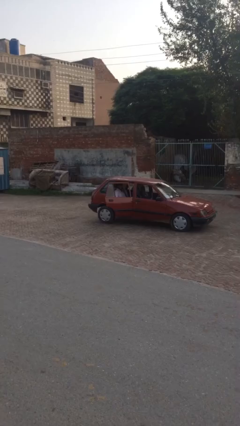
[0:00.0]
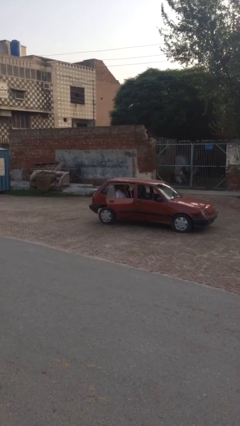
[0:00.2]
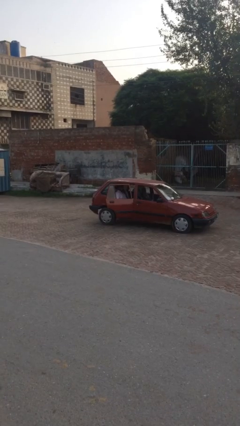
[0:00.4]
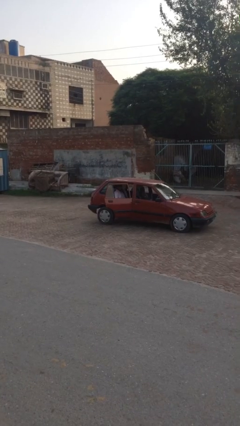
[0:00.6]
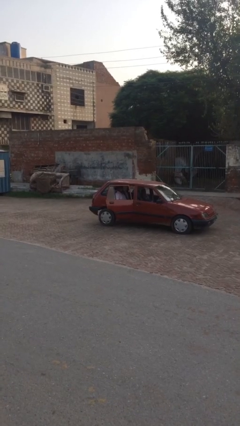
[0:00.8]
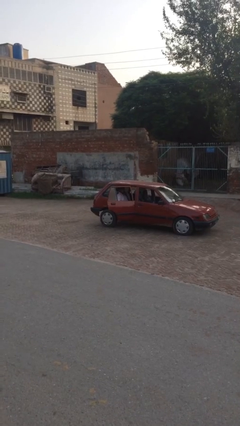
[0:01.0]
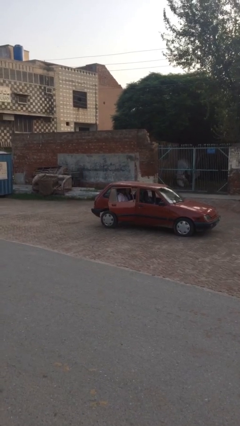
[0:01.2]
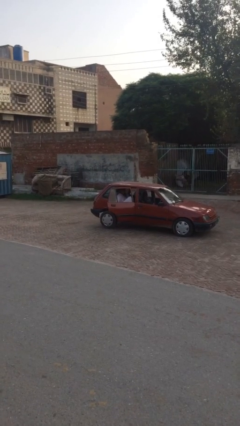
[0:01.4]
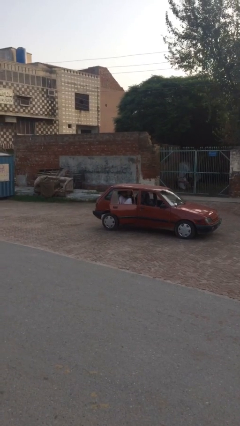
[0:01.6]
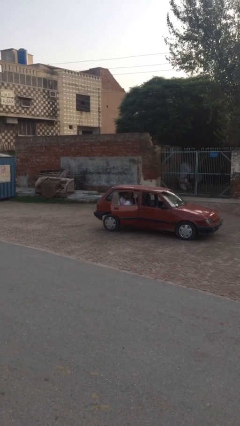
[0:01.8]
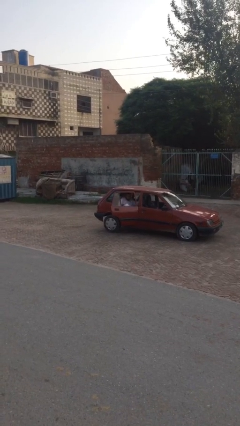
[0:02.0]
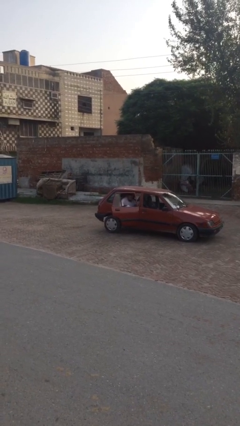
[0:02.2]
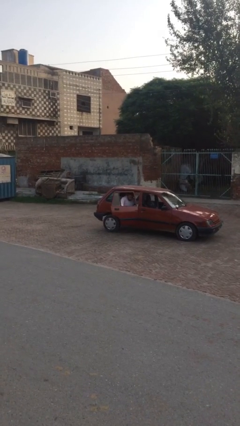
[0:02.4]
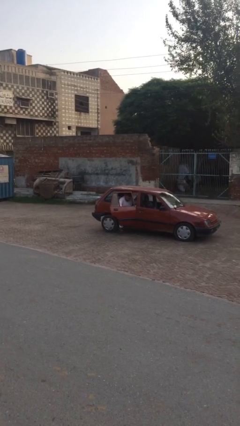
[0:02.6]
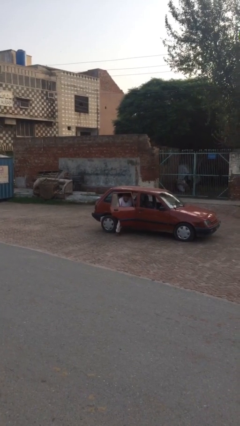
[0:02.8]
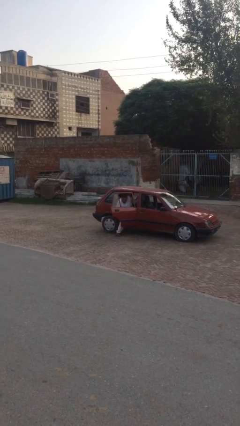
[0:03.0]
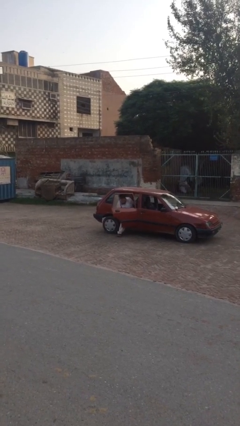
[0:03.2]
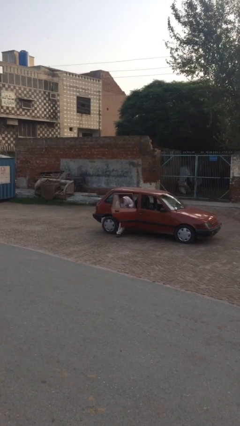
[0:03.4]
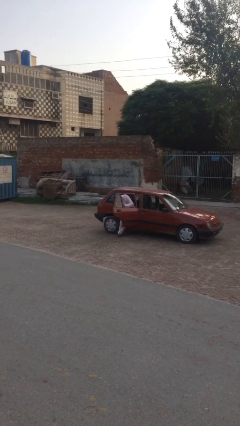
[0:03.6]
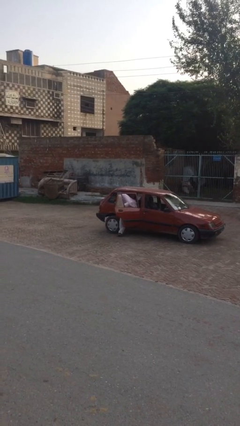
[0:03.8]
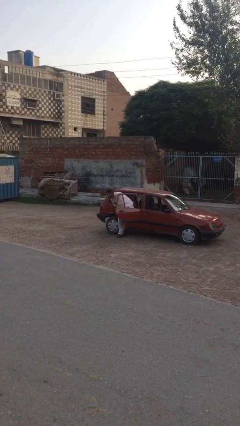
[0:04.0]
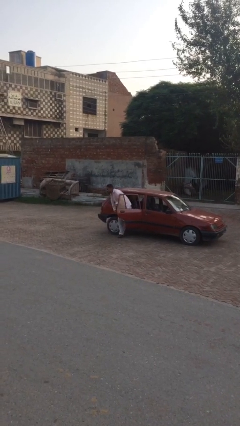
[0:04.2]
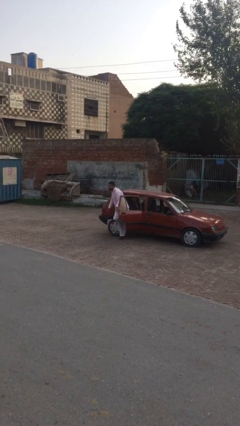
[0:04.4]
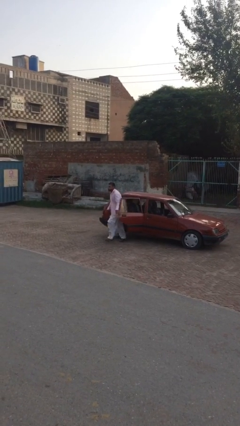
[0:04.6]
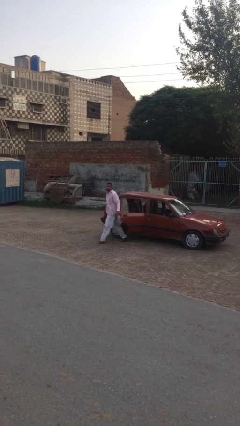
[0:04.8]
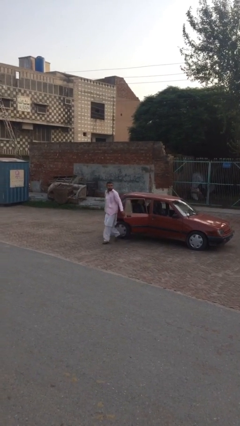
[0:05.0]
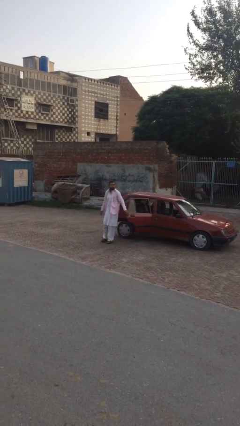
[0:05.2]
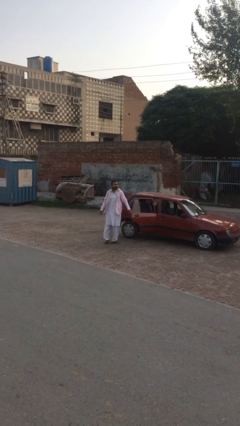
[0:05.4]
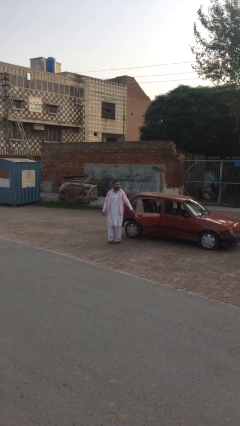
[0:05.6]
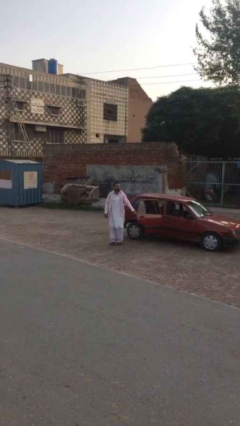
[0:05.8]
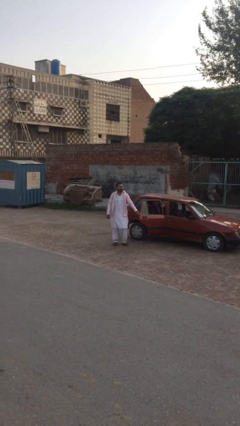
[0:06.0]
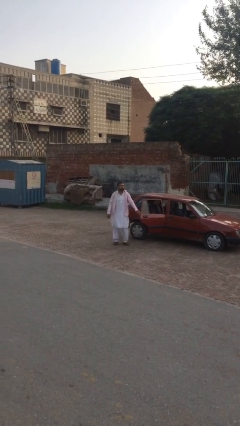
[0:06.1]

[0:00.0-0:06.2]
person exits car

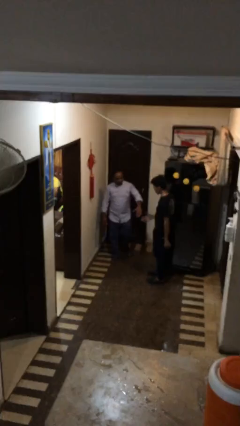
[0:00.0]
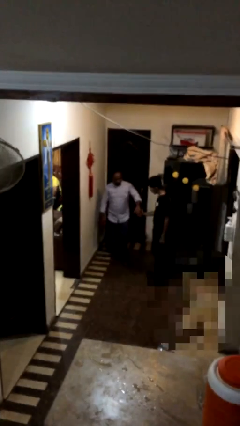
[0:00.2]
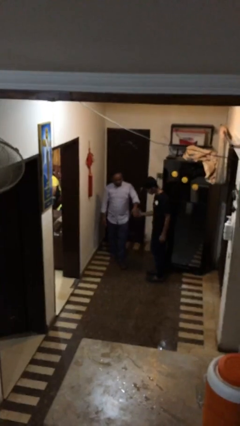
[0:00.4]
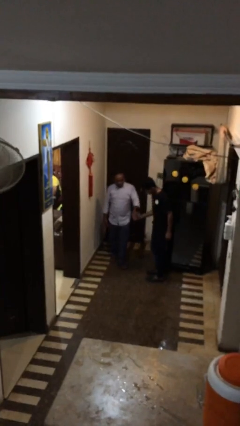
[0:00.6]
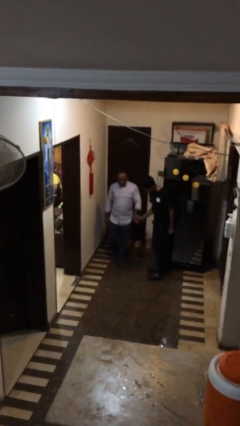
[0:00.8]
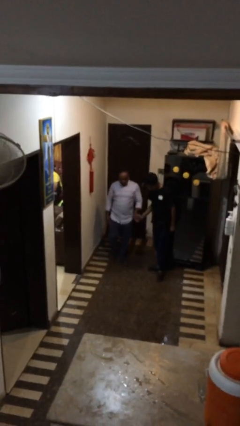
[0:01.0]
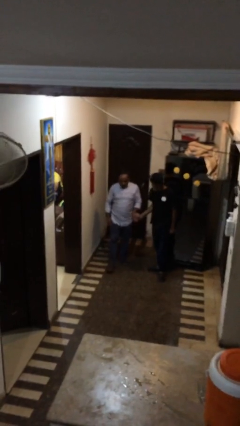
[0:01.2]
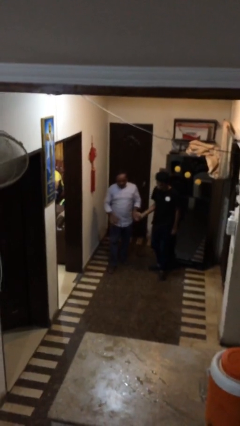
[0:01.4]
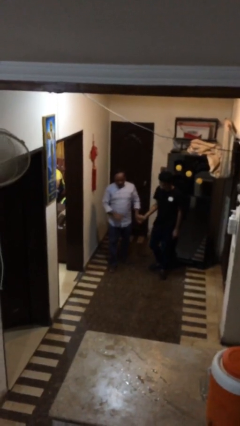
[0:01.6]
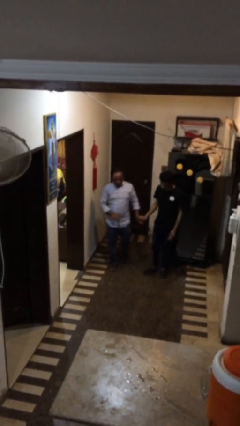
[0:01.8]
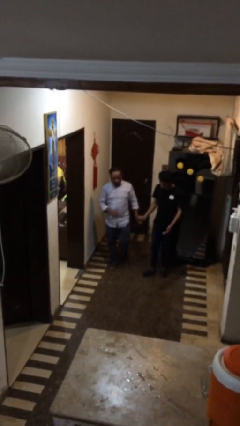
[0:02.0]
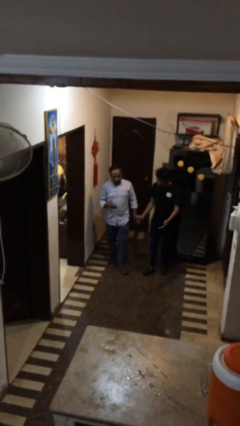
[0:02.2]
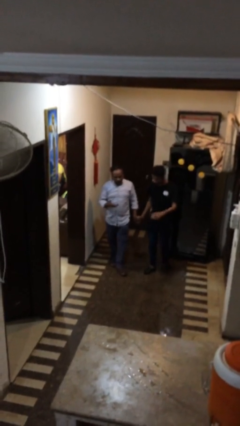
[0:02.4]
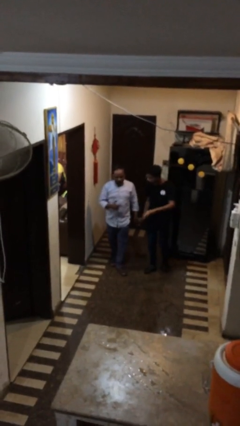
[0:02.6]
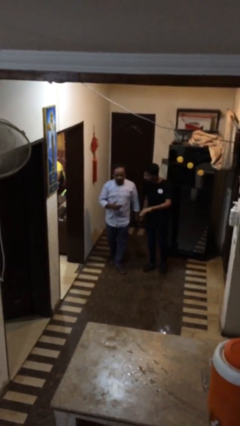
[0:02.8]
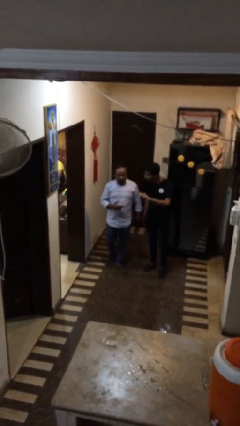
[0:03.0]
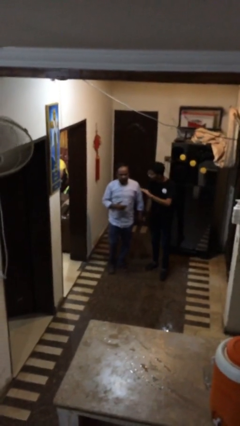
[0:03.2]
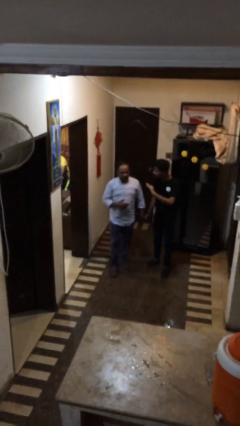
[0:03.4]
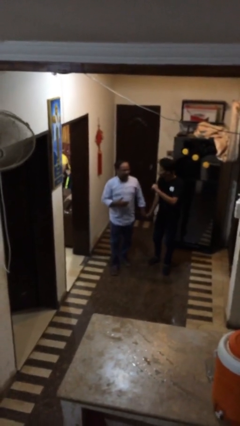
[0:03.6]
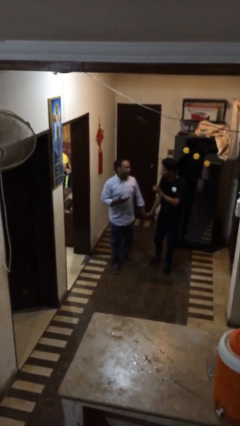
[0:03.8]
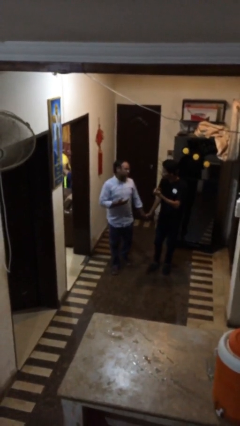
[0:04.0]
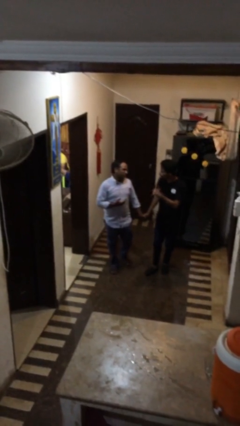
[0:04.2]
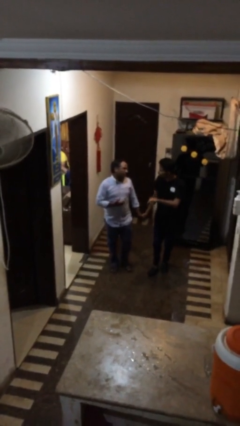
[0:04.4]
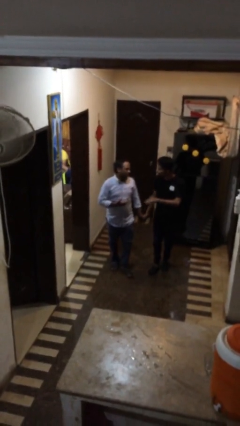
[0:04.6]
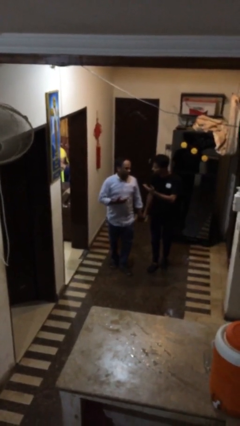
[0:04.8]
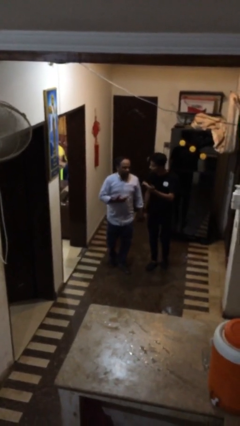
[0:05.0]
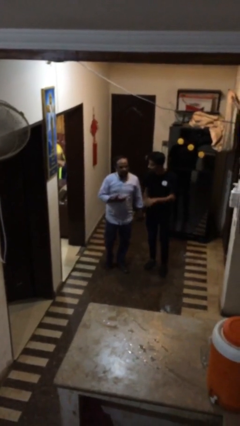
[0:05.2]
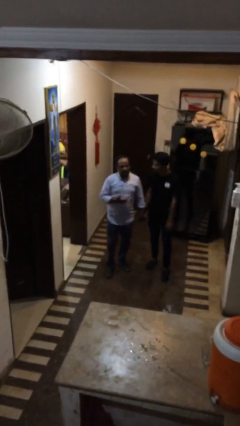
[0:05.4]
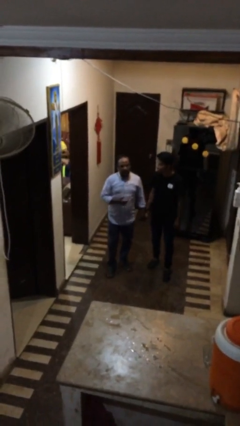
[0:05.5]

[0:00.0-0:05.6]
person holds hand

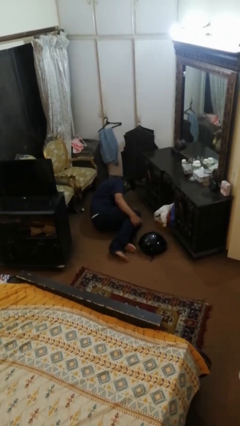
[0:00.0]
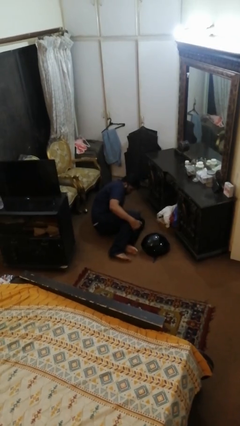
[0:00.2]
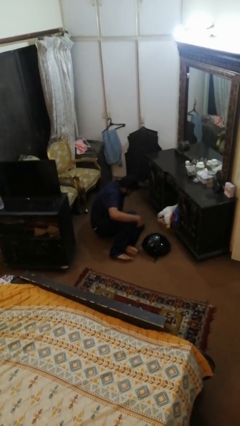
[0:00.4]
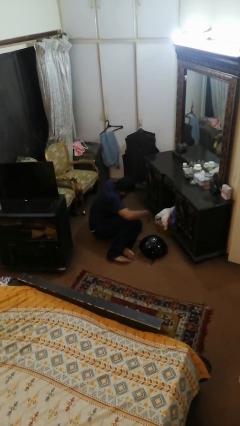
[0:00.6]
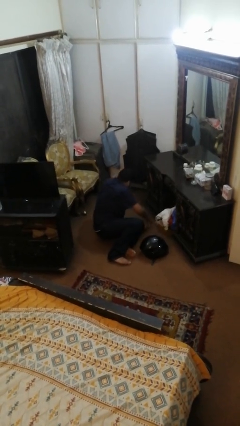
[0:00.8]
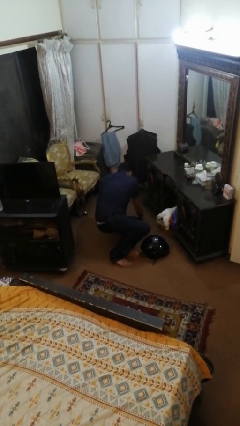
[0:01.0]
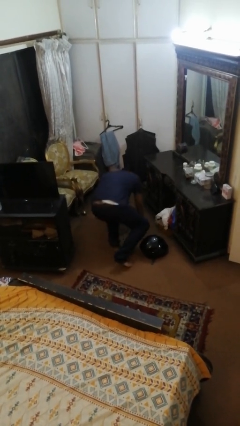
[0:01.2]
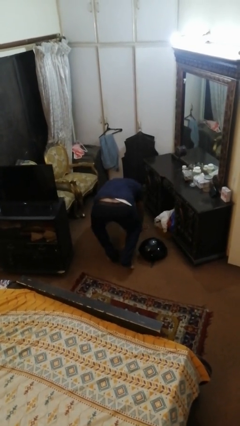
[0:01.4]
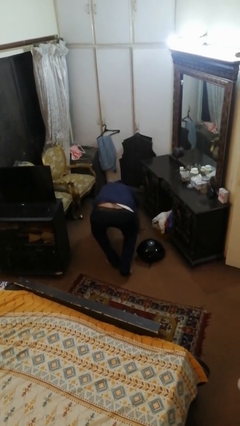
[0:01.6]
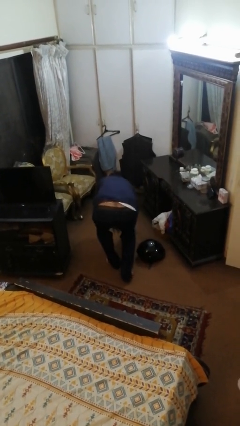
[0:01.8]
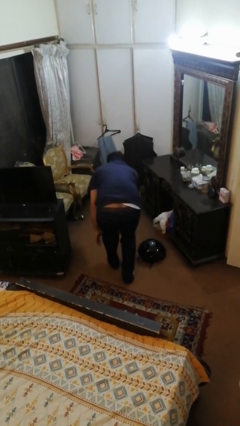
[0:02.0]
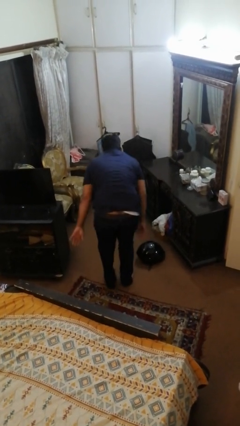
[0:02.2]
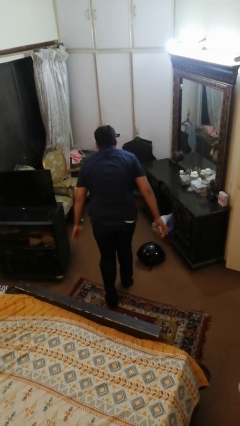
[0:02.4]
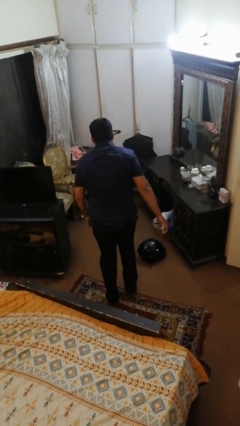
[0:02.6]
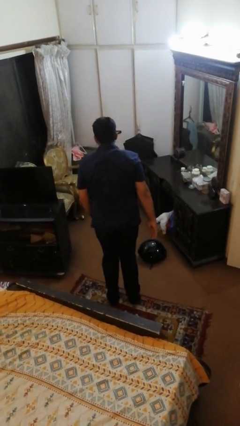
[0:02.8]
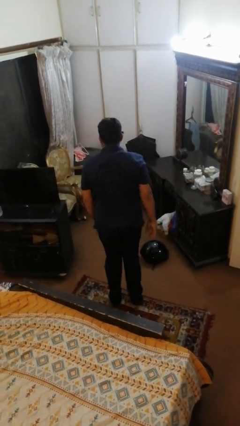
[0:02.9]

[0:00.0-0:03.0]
person stands up from floor

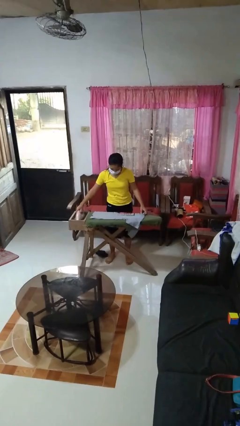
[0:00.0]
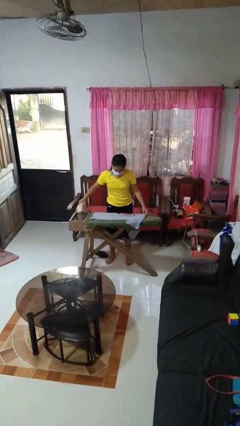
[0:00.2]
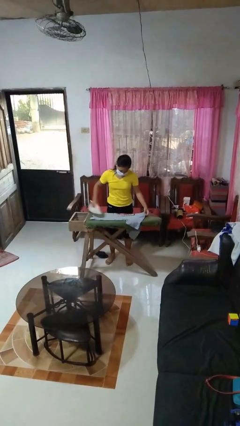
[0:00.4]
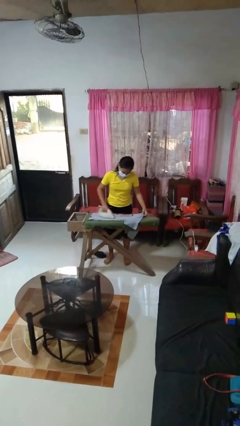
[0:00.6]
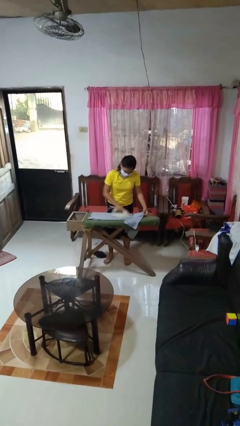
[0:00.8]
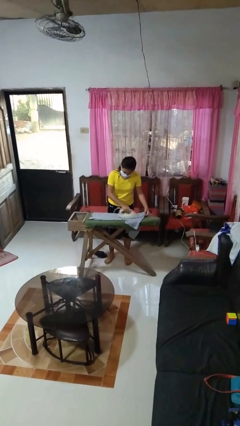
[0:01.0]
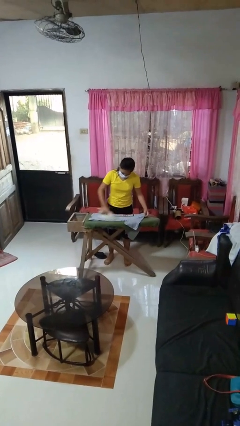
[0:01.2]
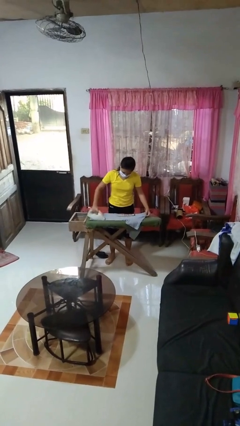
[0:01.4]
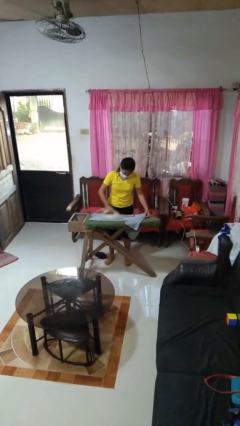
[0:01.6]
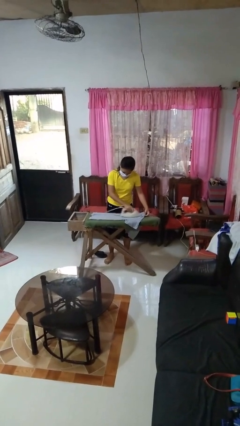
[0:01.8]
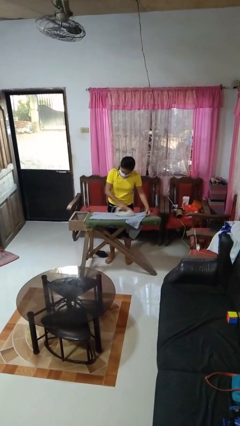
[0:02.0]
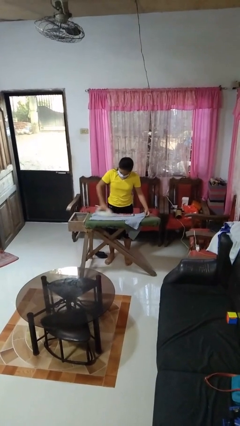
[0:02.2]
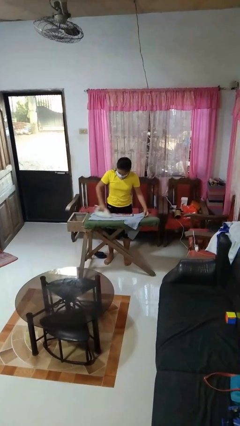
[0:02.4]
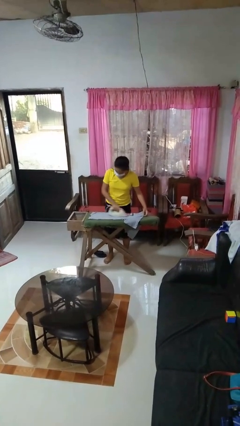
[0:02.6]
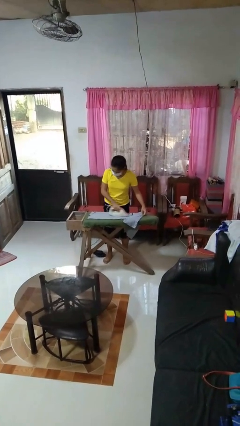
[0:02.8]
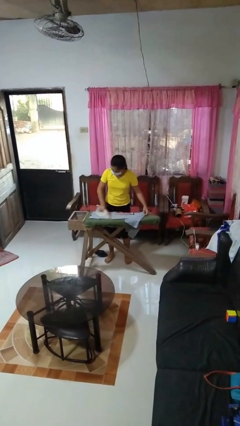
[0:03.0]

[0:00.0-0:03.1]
person irons clothes

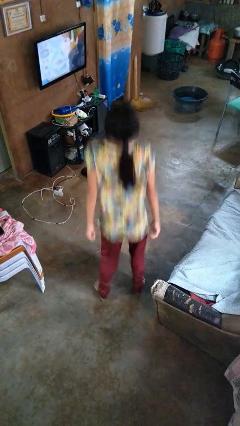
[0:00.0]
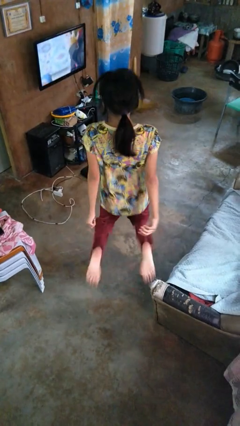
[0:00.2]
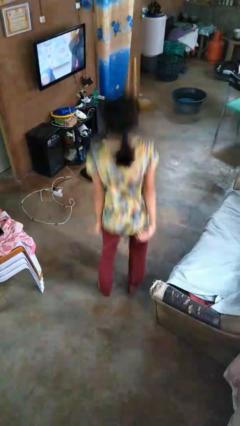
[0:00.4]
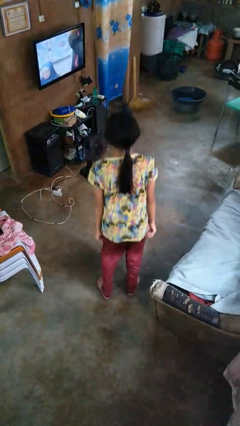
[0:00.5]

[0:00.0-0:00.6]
person jumps
